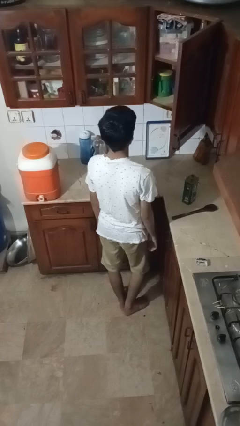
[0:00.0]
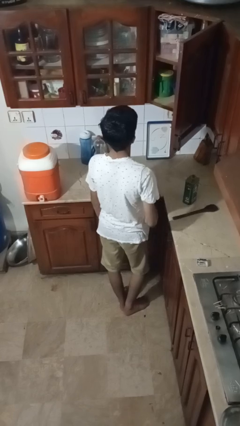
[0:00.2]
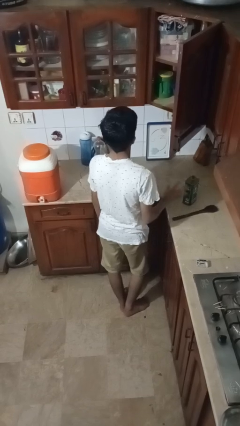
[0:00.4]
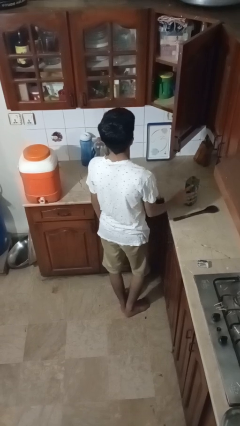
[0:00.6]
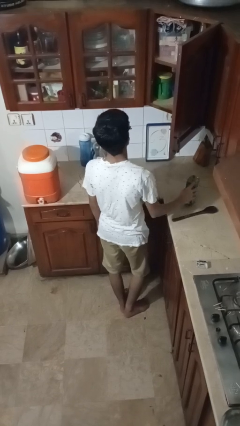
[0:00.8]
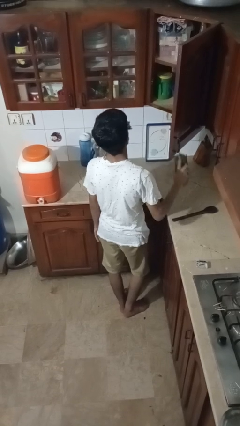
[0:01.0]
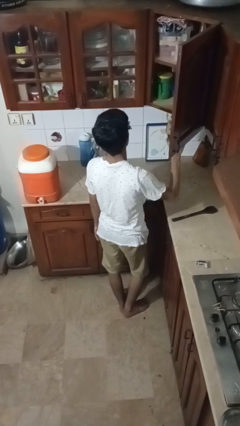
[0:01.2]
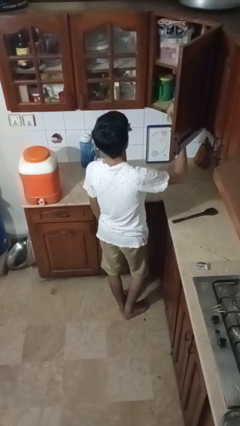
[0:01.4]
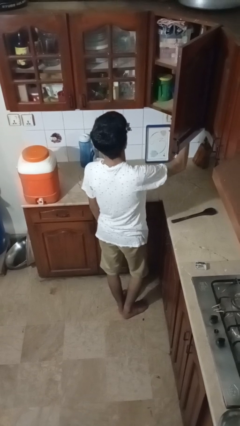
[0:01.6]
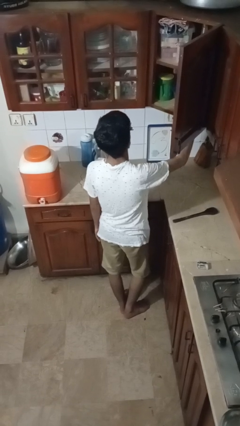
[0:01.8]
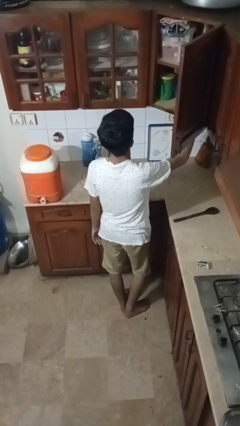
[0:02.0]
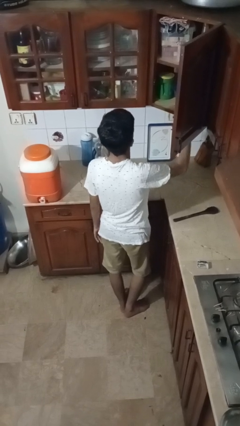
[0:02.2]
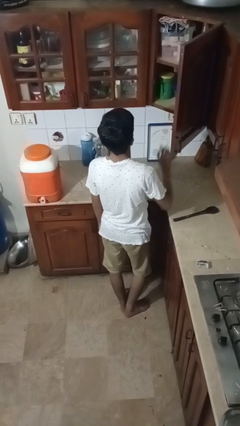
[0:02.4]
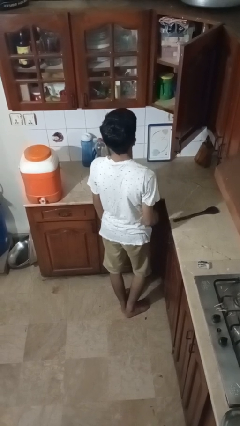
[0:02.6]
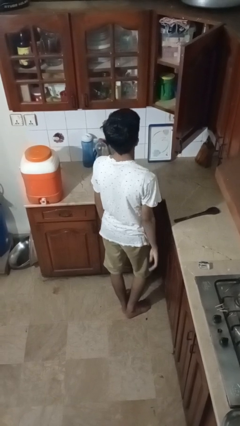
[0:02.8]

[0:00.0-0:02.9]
person puts object in cabinet

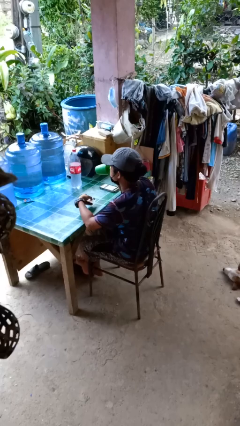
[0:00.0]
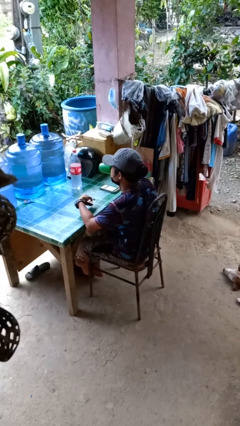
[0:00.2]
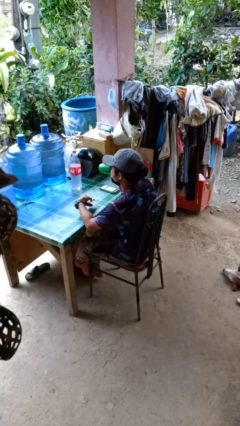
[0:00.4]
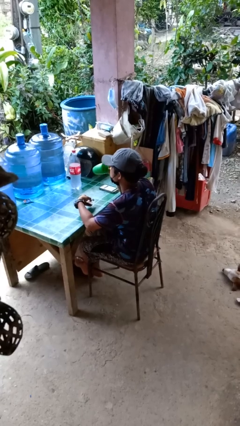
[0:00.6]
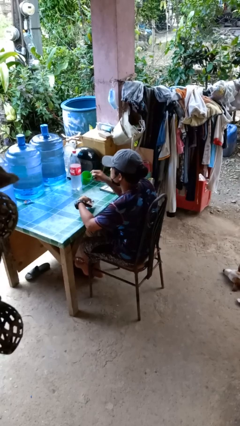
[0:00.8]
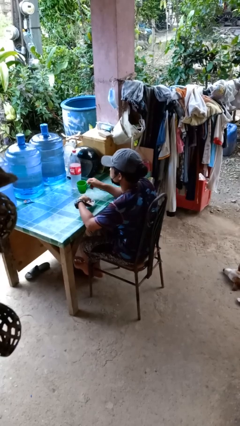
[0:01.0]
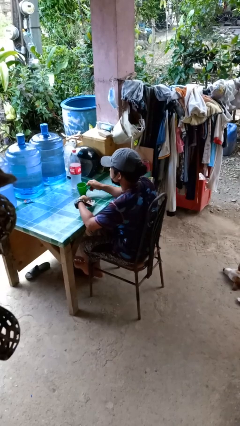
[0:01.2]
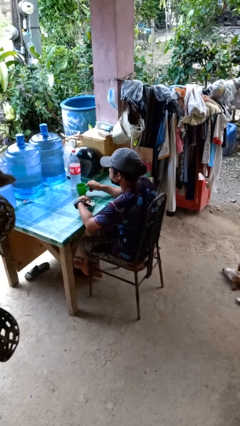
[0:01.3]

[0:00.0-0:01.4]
person drinks from cup

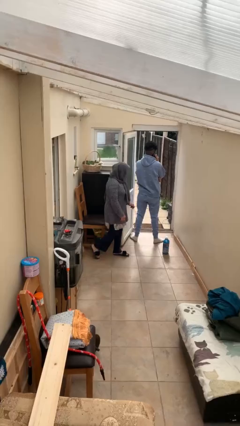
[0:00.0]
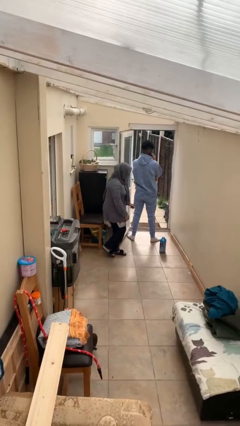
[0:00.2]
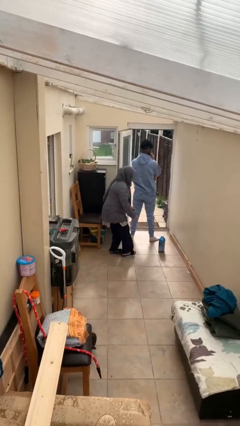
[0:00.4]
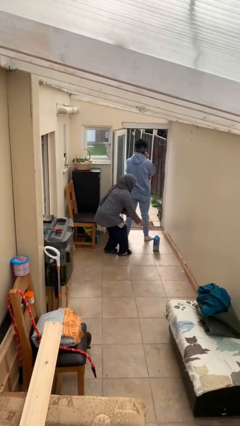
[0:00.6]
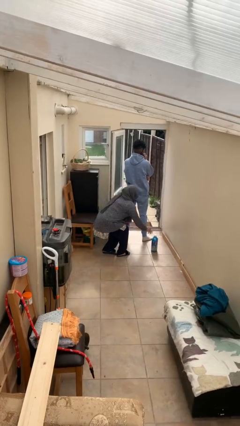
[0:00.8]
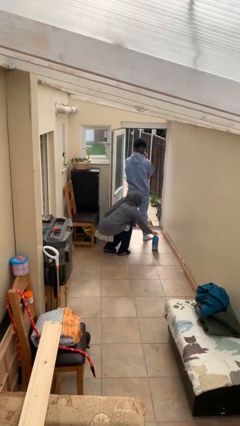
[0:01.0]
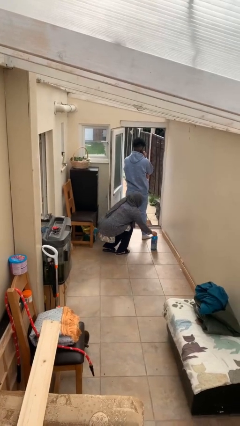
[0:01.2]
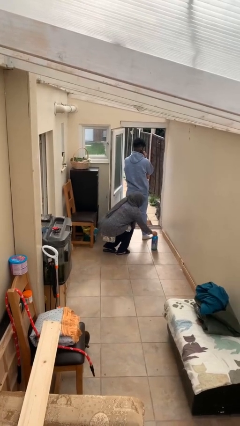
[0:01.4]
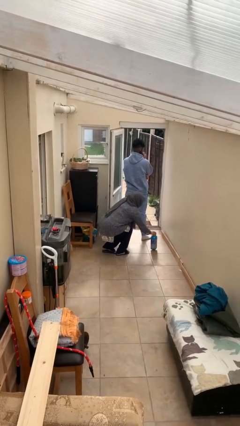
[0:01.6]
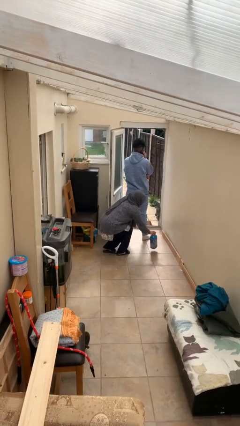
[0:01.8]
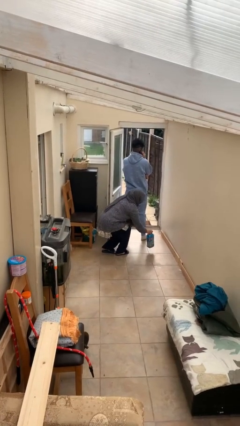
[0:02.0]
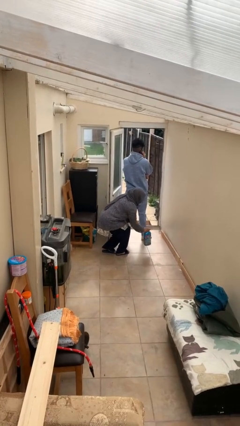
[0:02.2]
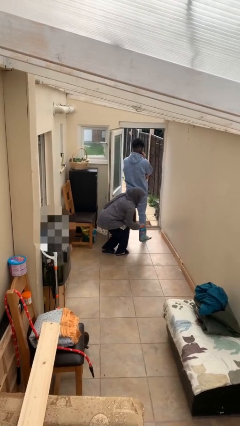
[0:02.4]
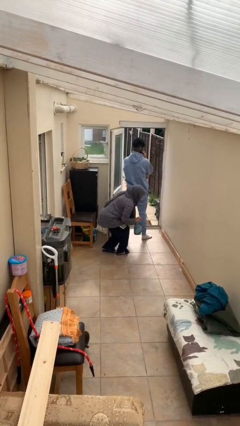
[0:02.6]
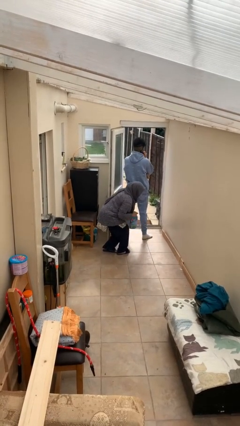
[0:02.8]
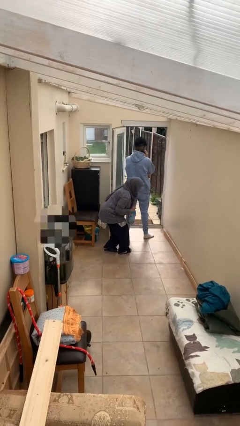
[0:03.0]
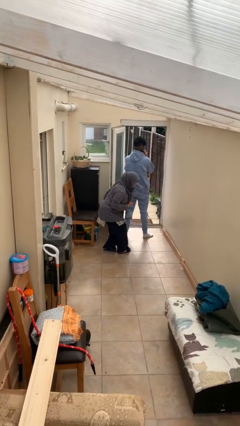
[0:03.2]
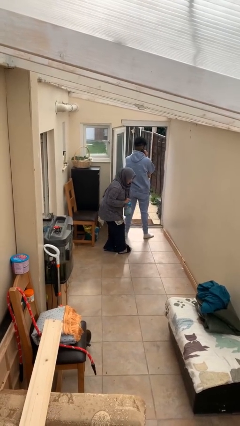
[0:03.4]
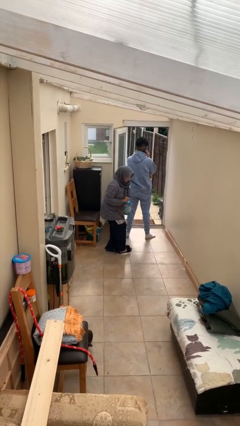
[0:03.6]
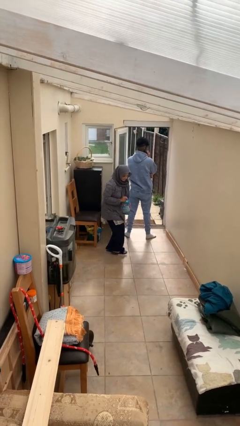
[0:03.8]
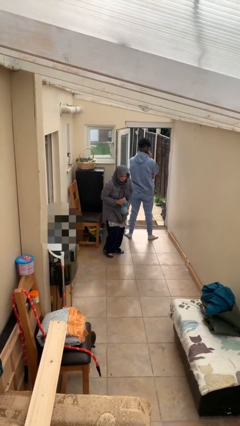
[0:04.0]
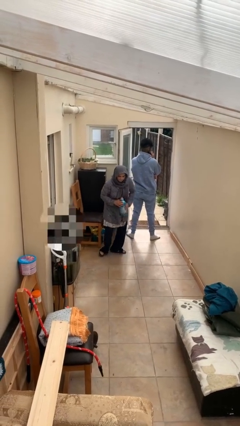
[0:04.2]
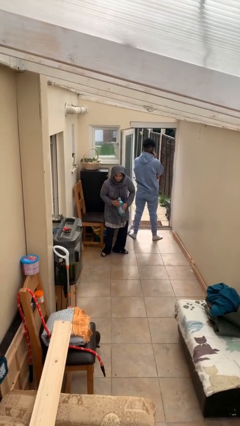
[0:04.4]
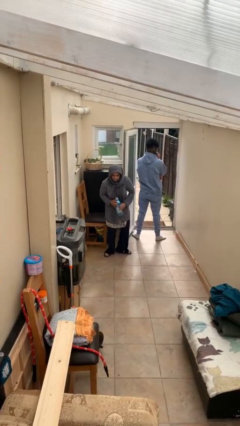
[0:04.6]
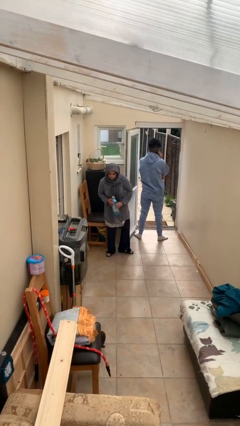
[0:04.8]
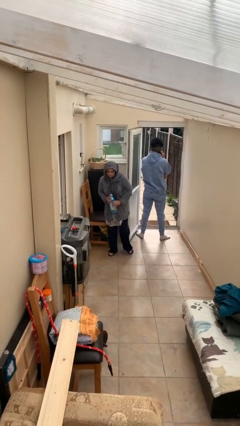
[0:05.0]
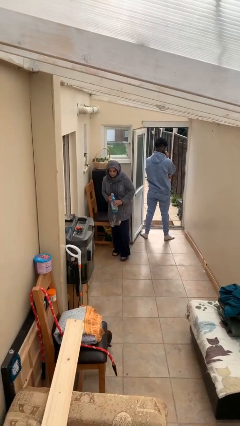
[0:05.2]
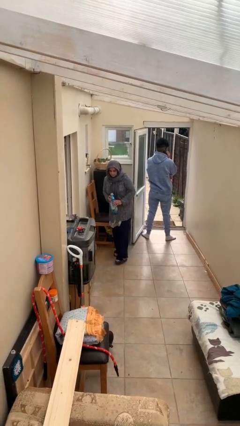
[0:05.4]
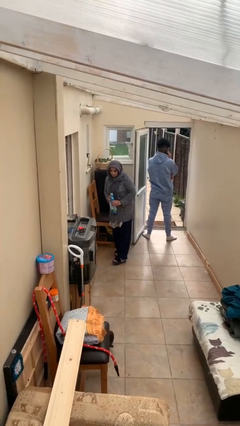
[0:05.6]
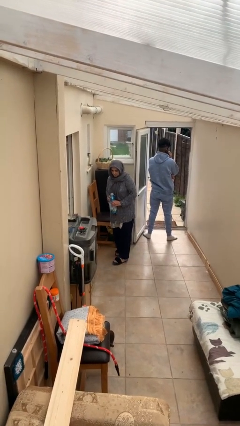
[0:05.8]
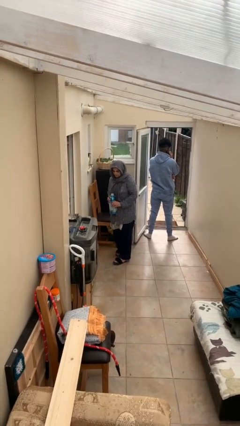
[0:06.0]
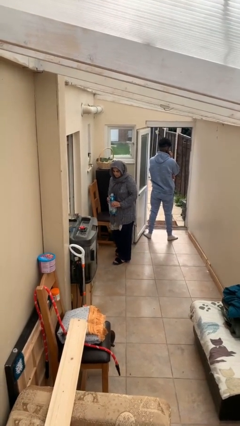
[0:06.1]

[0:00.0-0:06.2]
person steals object from person

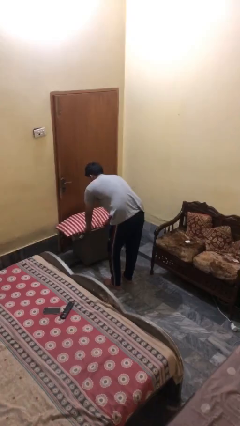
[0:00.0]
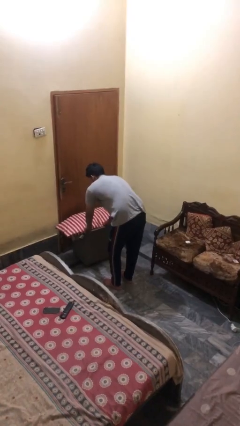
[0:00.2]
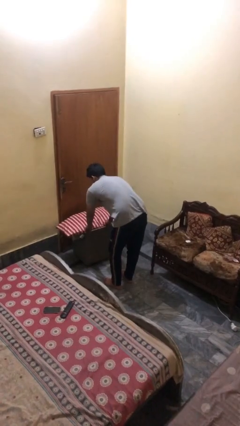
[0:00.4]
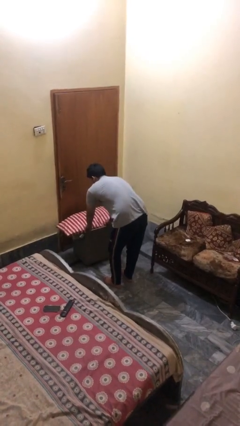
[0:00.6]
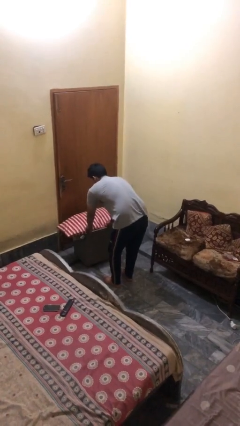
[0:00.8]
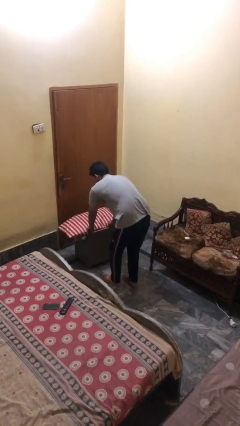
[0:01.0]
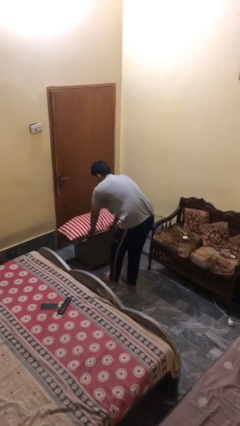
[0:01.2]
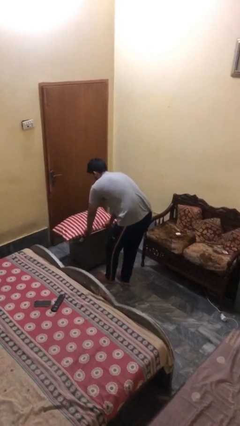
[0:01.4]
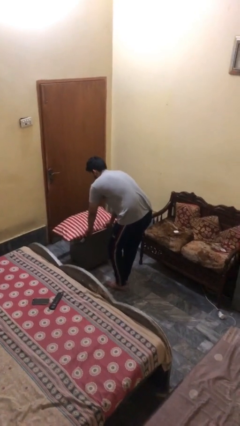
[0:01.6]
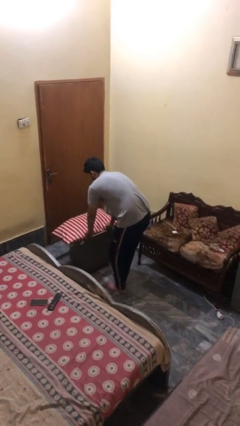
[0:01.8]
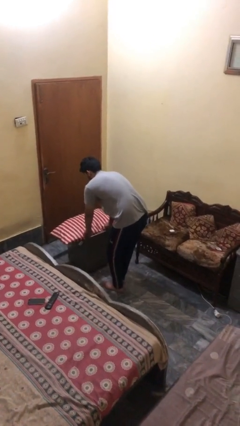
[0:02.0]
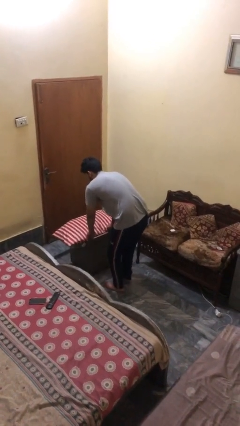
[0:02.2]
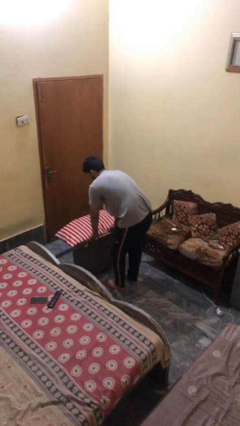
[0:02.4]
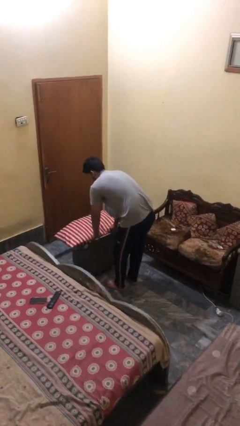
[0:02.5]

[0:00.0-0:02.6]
person pulls wheeled cart

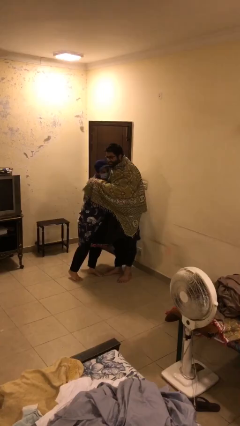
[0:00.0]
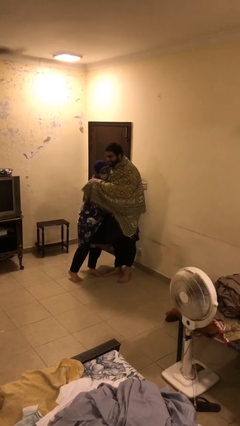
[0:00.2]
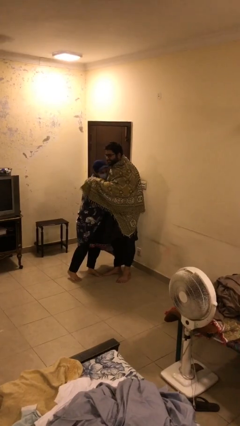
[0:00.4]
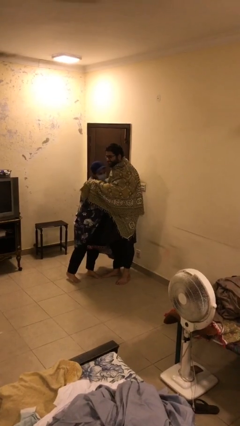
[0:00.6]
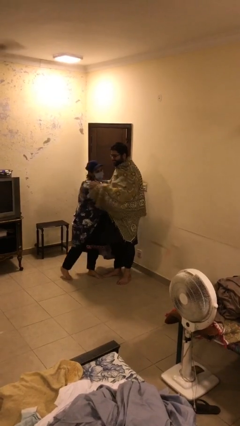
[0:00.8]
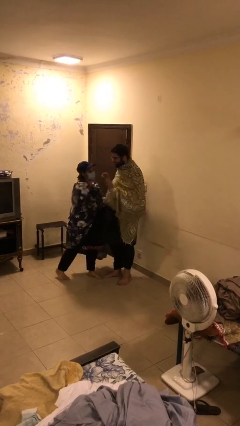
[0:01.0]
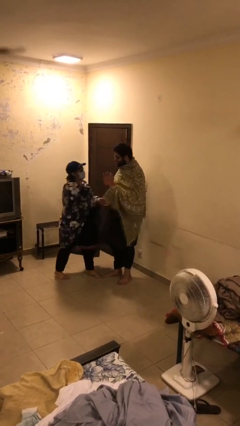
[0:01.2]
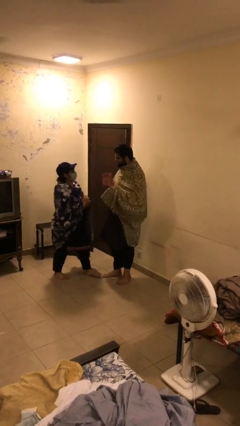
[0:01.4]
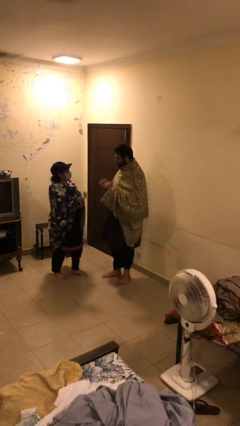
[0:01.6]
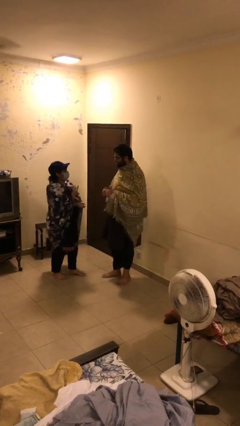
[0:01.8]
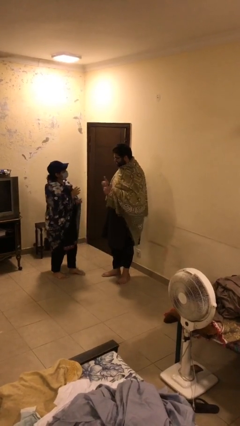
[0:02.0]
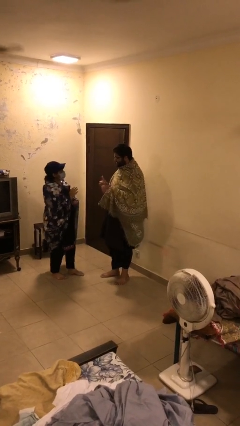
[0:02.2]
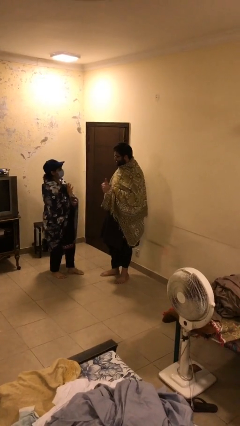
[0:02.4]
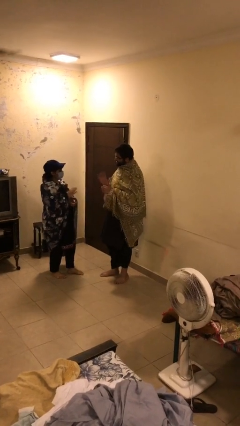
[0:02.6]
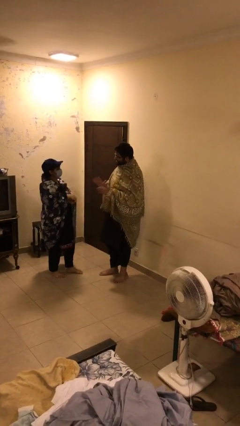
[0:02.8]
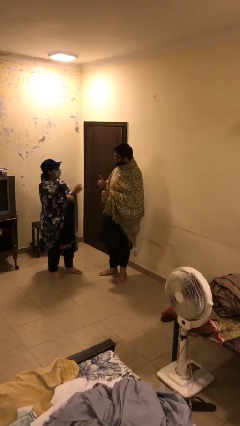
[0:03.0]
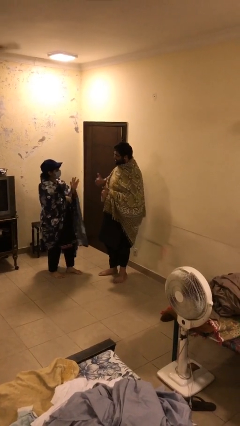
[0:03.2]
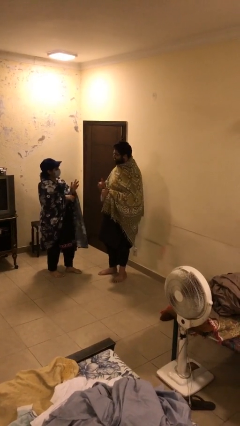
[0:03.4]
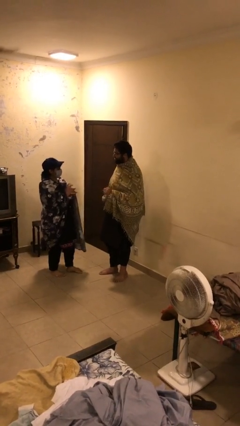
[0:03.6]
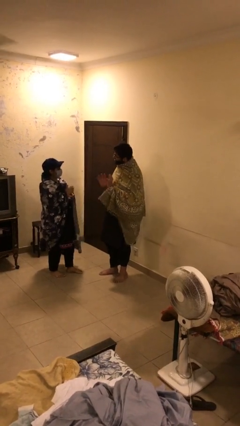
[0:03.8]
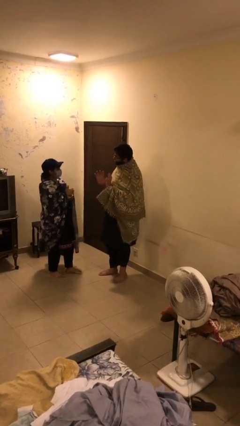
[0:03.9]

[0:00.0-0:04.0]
person talks to person

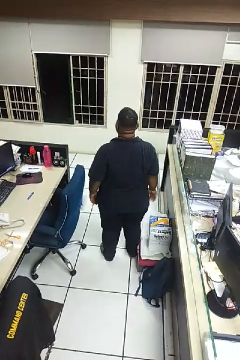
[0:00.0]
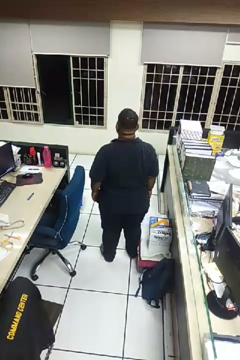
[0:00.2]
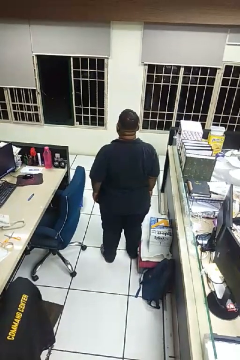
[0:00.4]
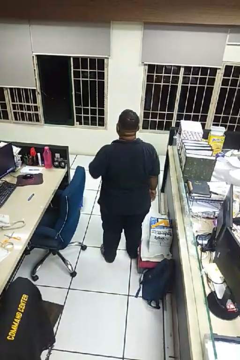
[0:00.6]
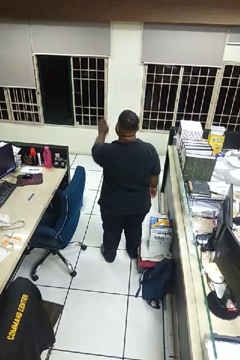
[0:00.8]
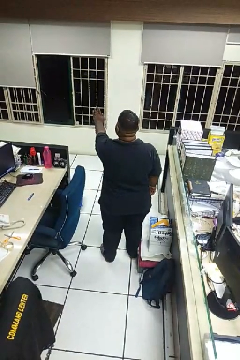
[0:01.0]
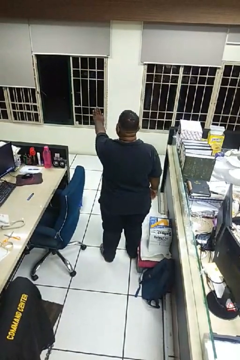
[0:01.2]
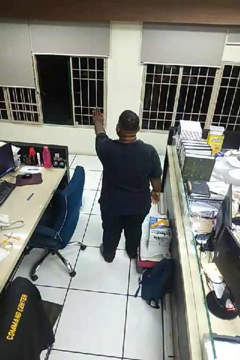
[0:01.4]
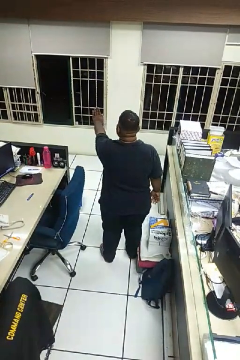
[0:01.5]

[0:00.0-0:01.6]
person gestures stop
